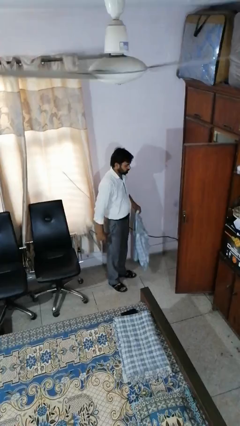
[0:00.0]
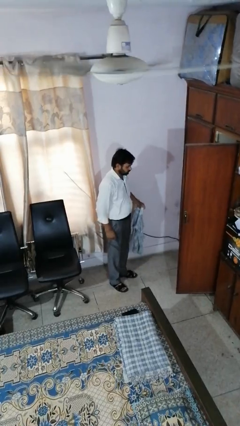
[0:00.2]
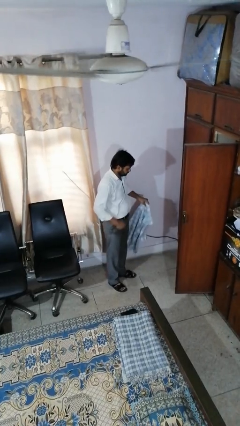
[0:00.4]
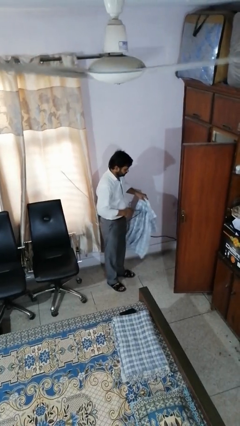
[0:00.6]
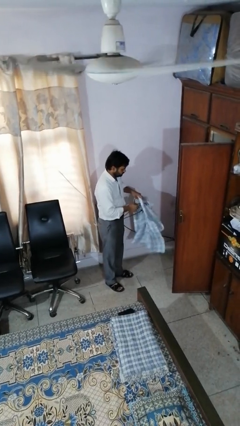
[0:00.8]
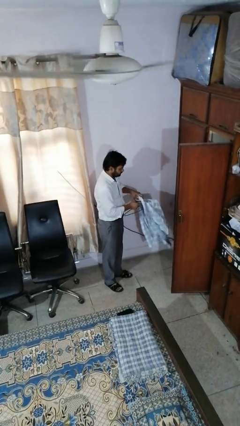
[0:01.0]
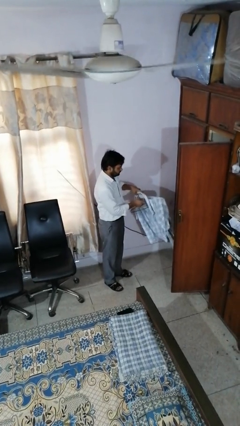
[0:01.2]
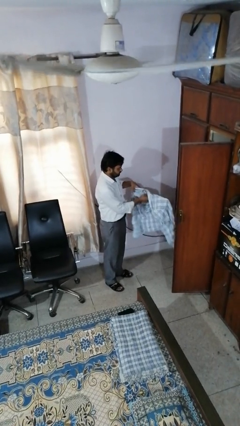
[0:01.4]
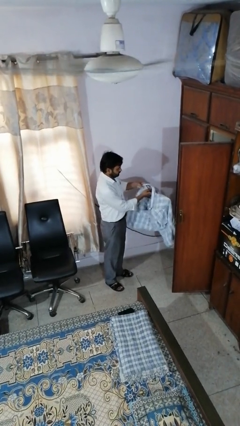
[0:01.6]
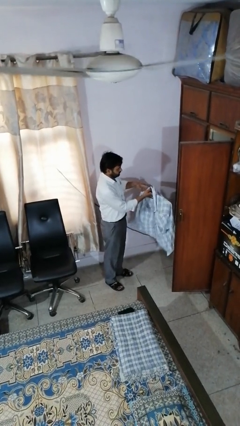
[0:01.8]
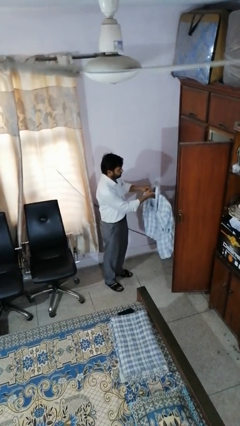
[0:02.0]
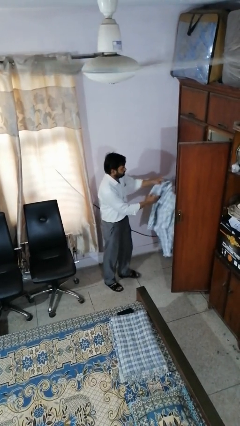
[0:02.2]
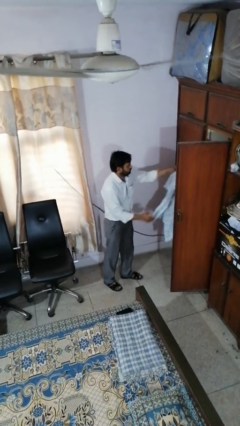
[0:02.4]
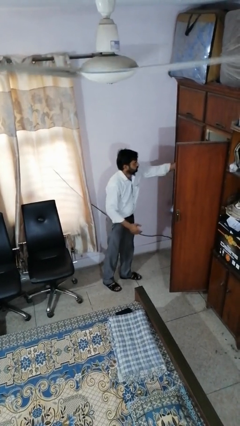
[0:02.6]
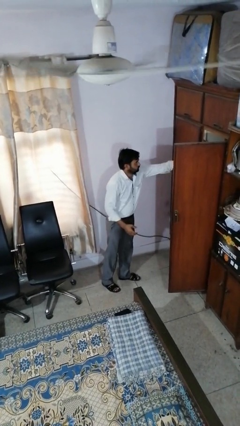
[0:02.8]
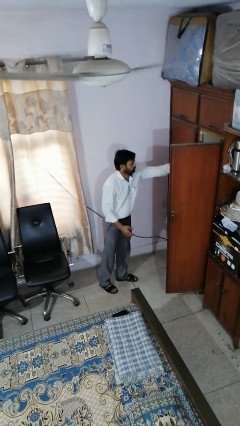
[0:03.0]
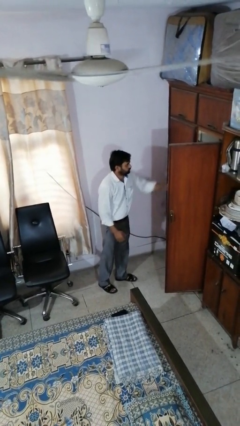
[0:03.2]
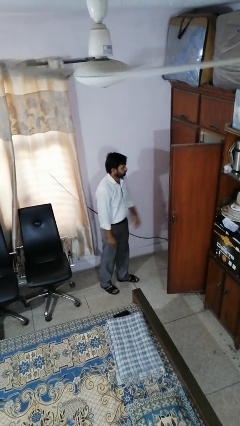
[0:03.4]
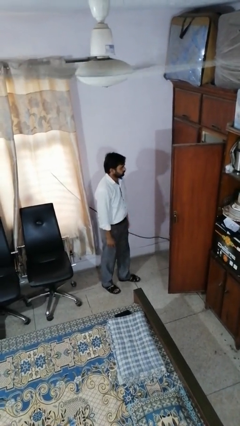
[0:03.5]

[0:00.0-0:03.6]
person puts clothes into closet

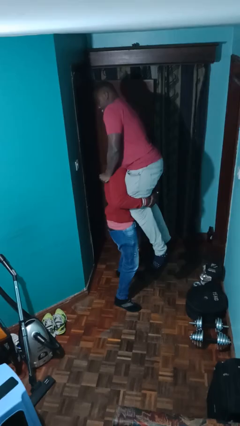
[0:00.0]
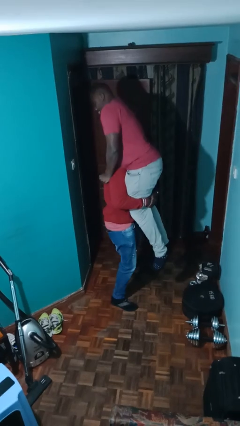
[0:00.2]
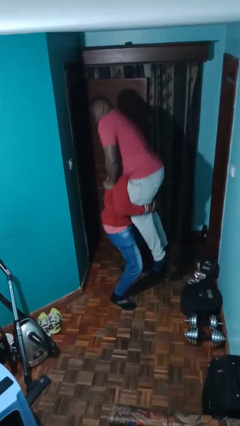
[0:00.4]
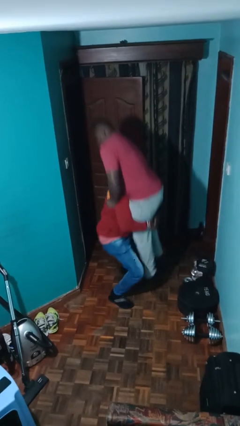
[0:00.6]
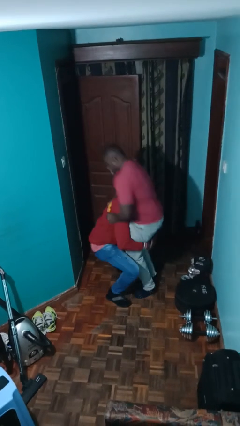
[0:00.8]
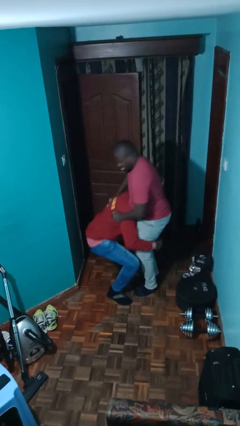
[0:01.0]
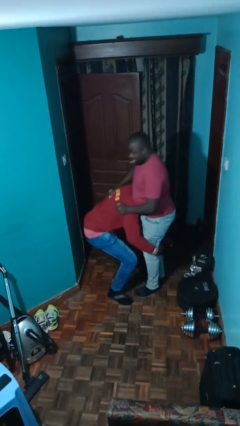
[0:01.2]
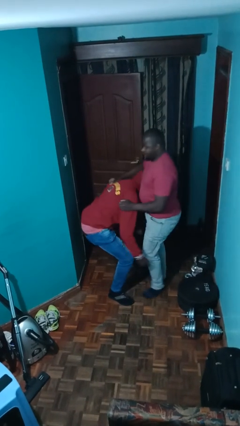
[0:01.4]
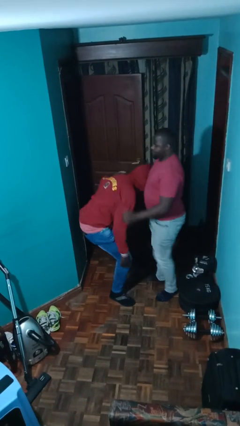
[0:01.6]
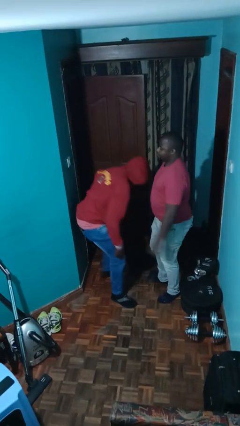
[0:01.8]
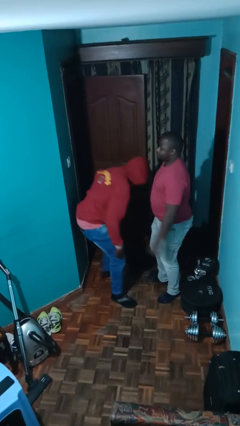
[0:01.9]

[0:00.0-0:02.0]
person puts down person

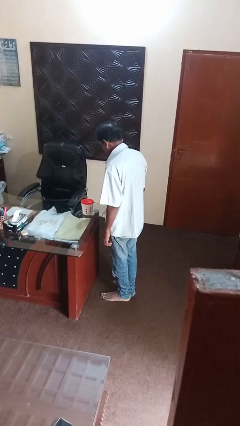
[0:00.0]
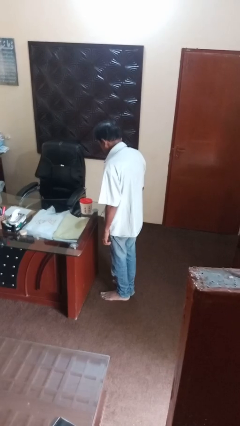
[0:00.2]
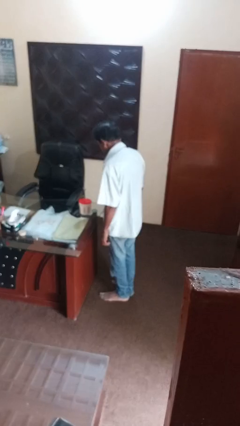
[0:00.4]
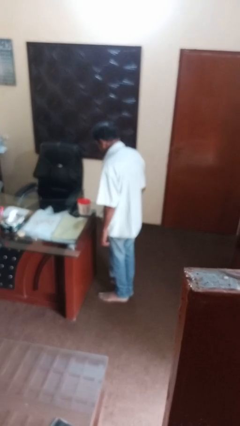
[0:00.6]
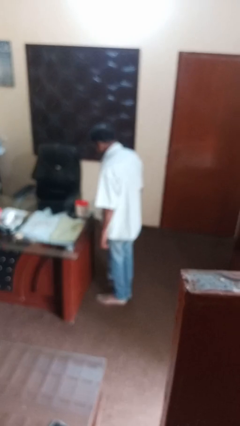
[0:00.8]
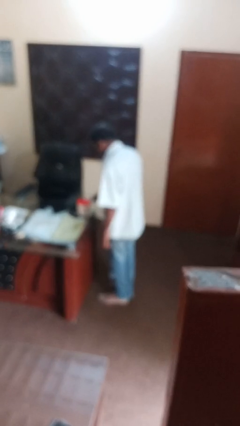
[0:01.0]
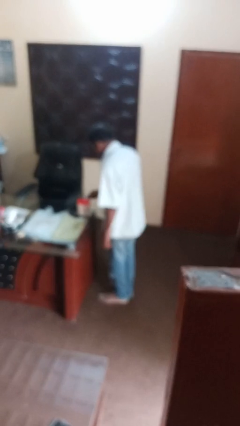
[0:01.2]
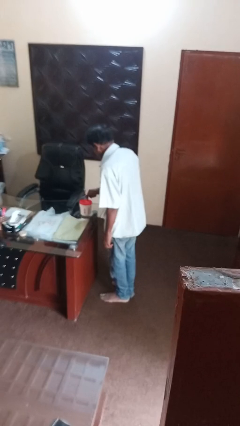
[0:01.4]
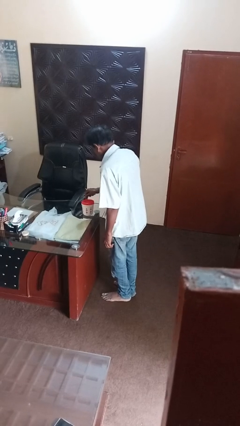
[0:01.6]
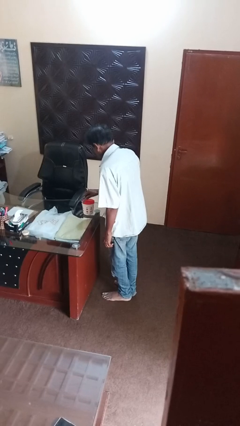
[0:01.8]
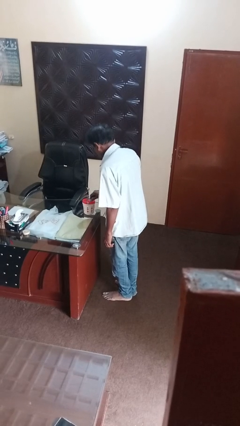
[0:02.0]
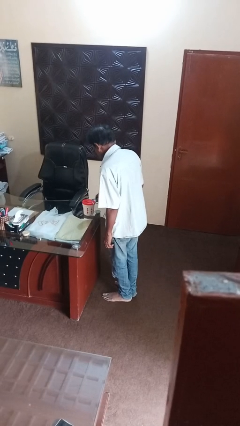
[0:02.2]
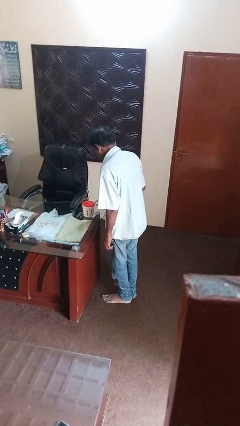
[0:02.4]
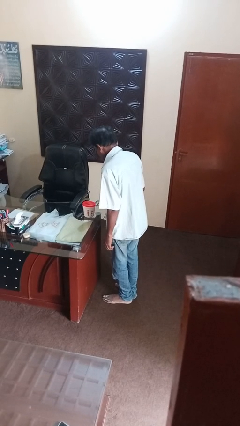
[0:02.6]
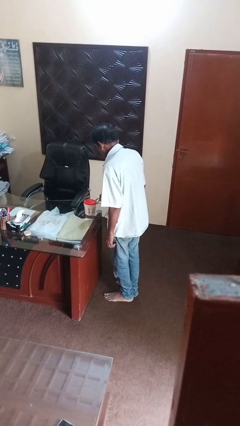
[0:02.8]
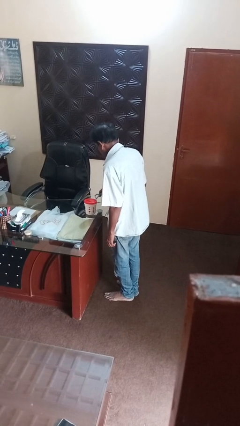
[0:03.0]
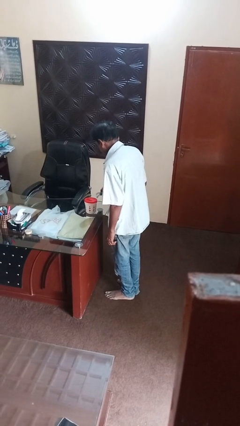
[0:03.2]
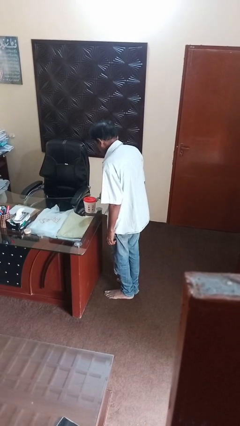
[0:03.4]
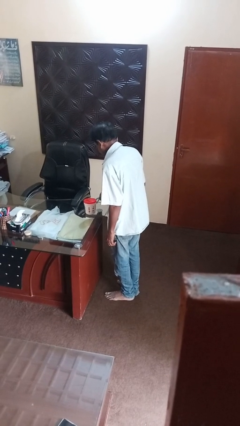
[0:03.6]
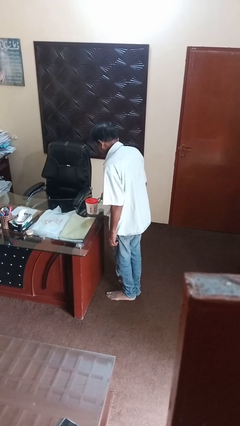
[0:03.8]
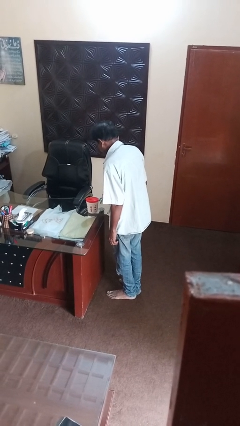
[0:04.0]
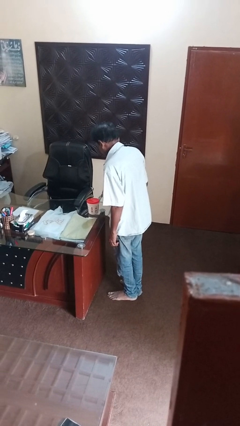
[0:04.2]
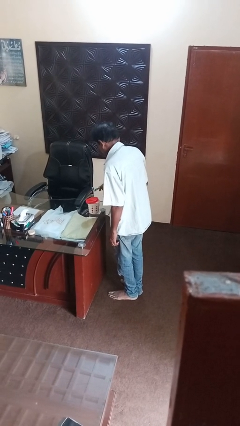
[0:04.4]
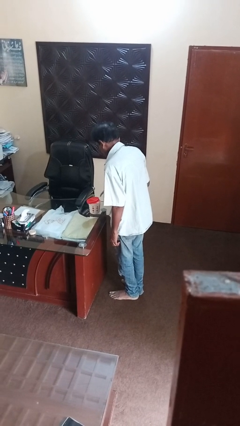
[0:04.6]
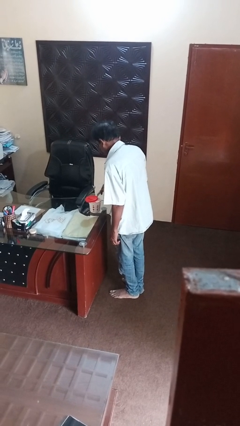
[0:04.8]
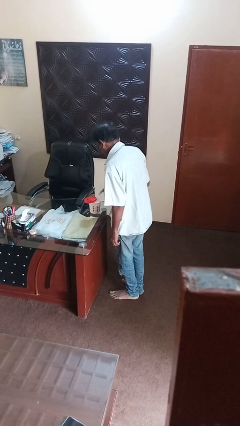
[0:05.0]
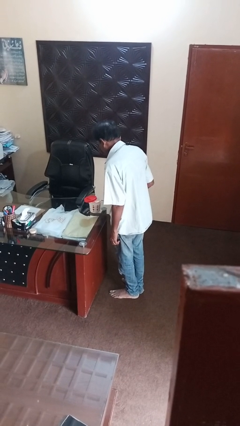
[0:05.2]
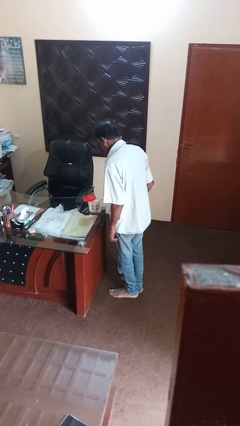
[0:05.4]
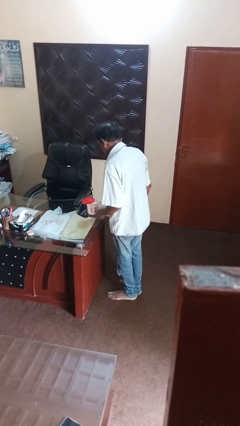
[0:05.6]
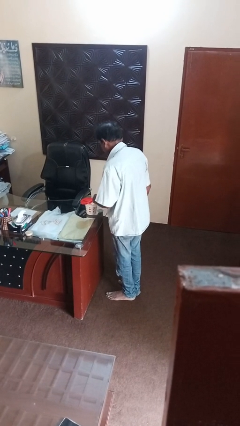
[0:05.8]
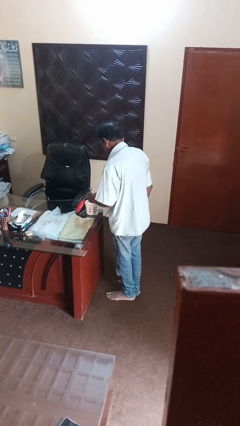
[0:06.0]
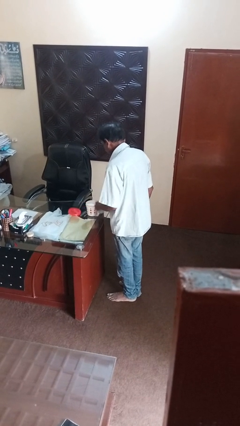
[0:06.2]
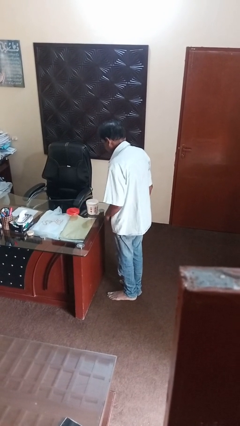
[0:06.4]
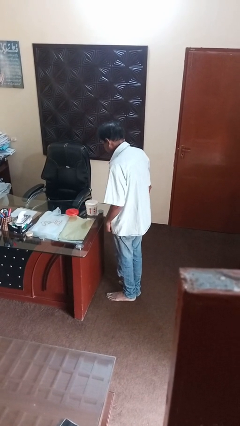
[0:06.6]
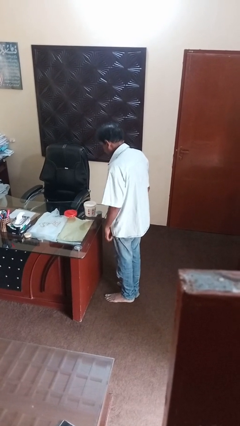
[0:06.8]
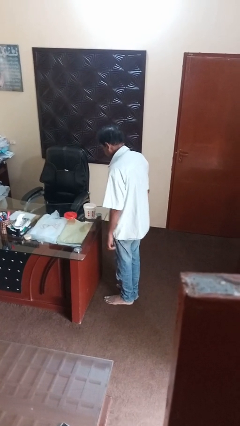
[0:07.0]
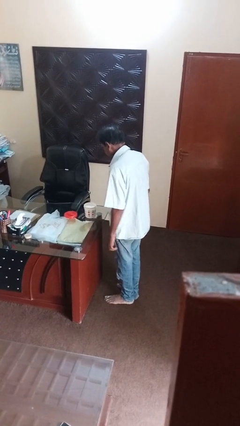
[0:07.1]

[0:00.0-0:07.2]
person opens can with can opener

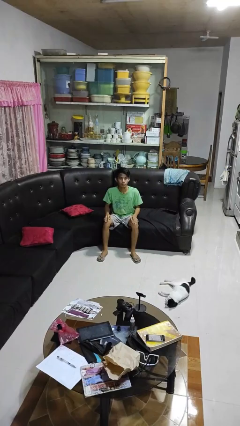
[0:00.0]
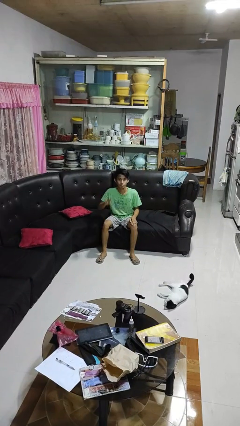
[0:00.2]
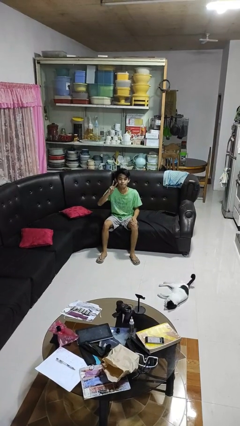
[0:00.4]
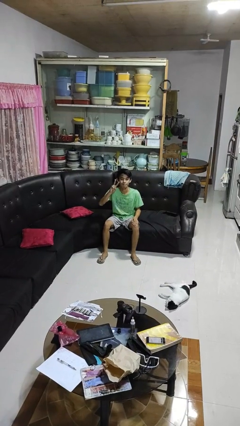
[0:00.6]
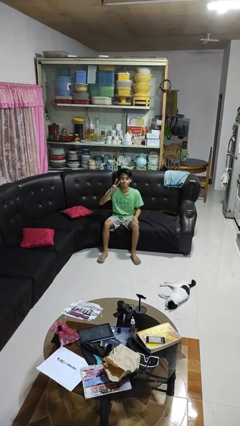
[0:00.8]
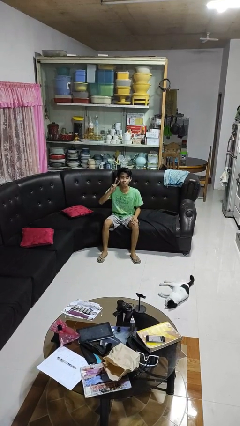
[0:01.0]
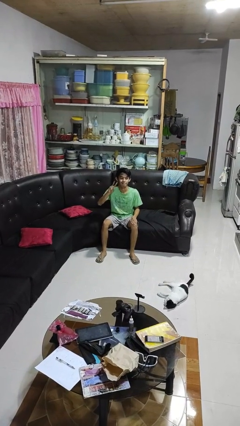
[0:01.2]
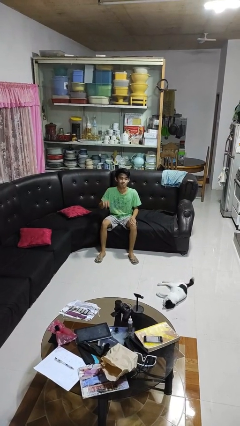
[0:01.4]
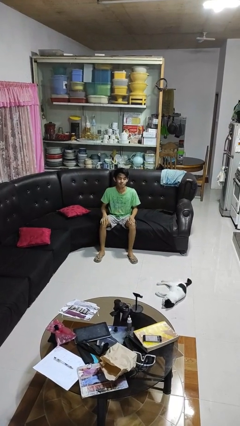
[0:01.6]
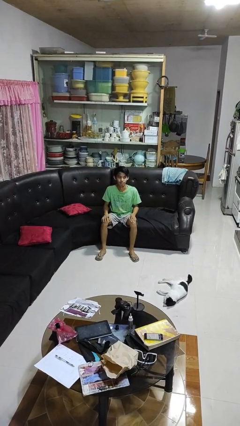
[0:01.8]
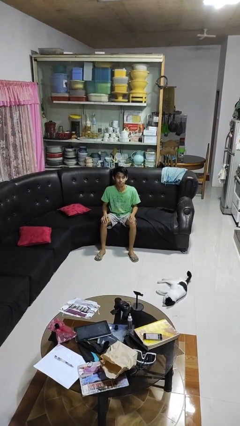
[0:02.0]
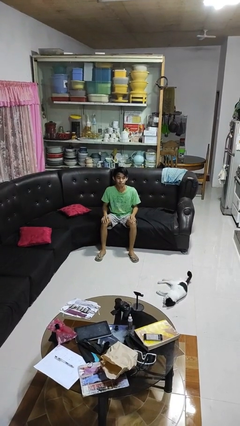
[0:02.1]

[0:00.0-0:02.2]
person gestures peace

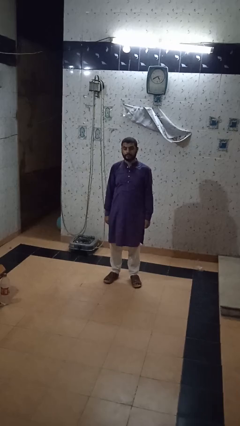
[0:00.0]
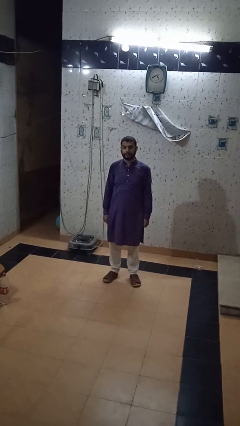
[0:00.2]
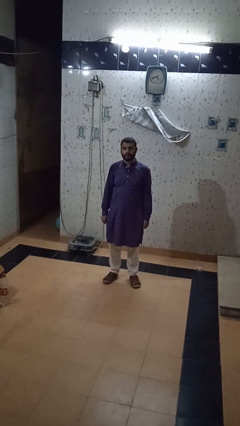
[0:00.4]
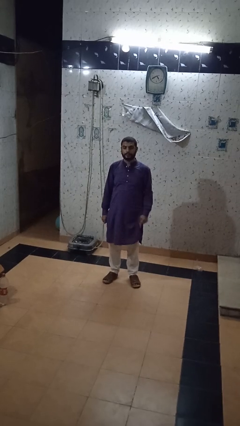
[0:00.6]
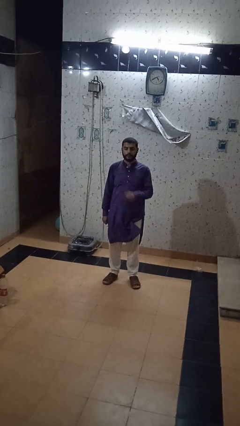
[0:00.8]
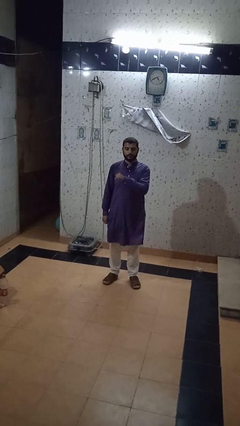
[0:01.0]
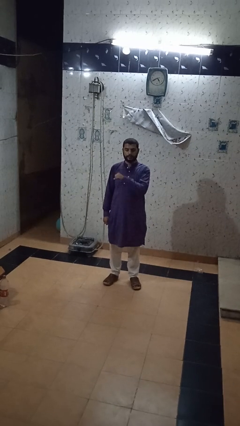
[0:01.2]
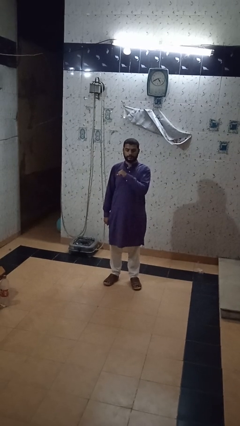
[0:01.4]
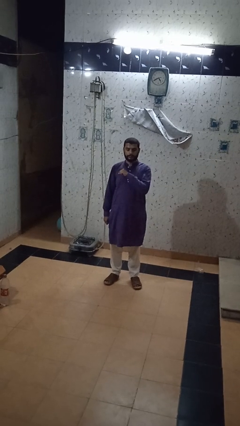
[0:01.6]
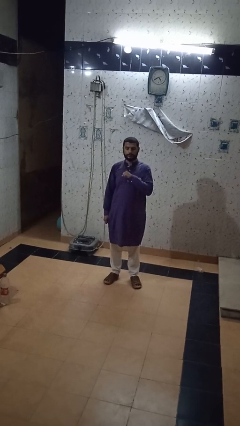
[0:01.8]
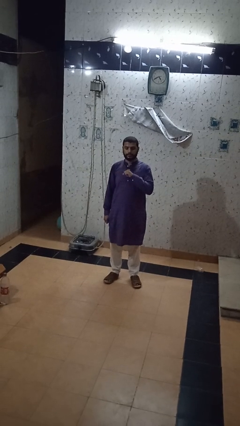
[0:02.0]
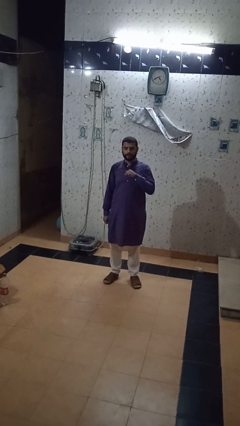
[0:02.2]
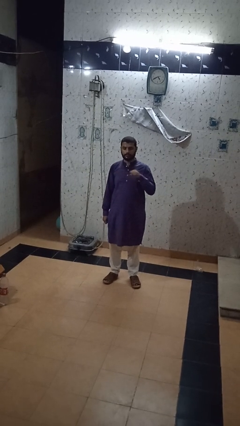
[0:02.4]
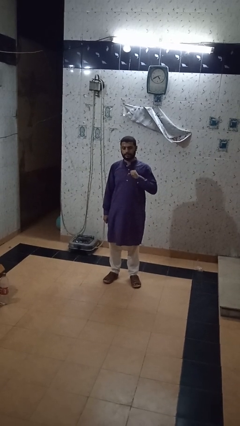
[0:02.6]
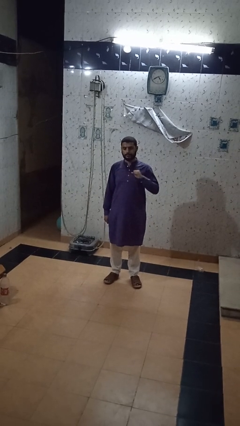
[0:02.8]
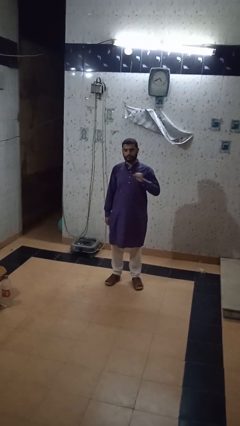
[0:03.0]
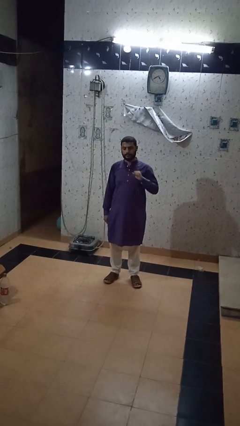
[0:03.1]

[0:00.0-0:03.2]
person drums on chest
